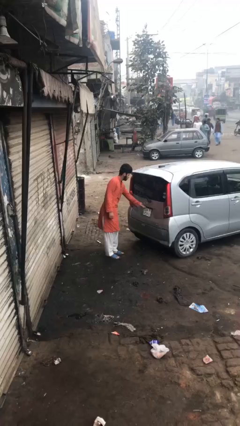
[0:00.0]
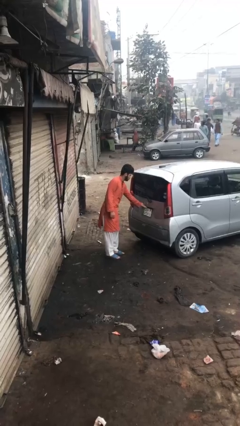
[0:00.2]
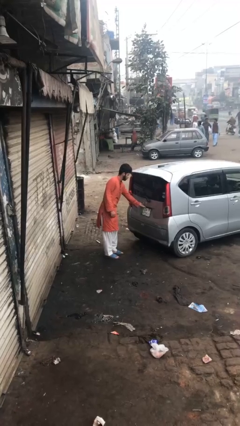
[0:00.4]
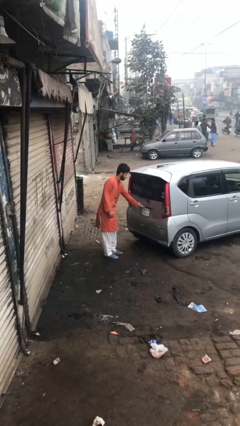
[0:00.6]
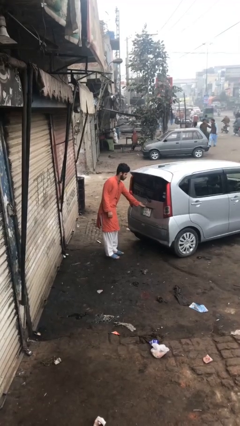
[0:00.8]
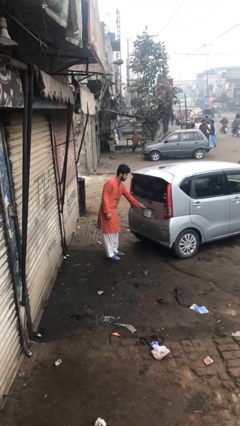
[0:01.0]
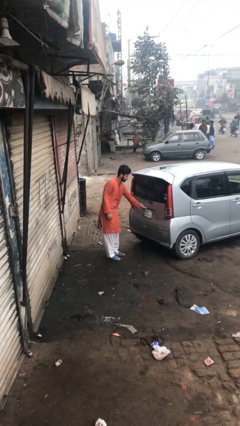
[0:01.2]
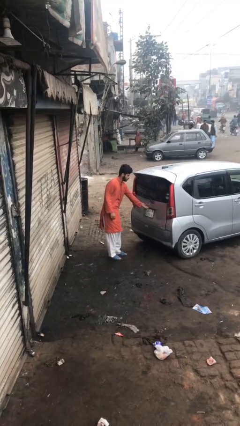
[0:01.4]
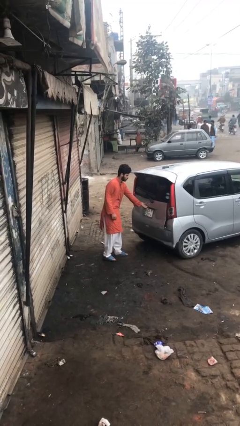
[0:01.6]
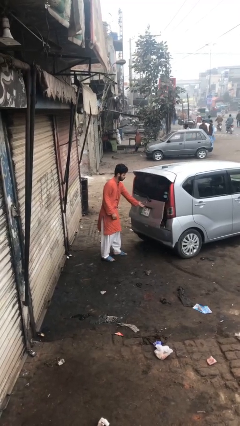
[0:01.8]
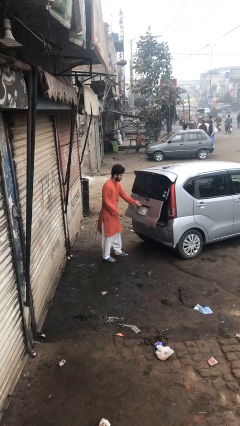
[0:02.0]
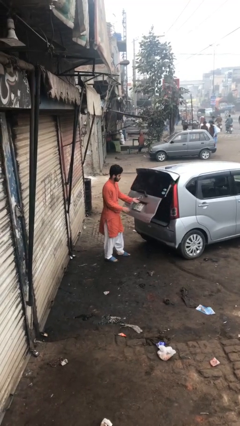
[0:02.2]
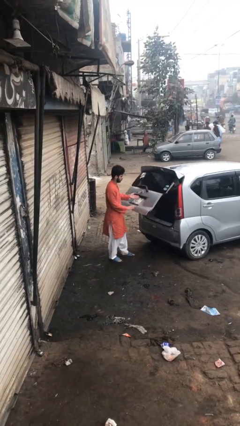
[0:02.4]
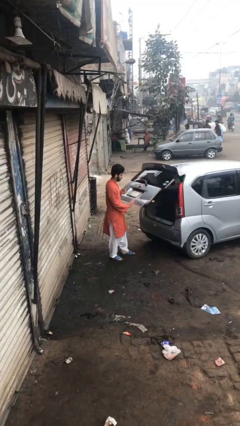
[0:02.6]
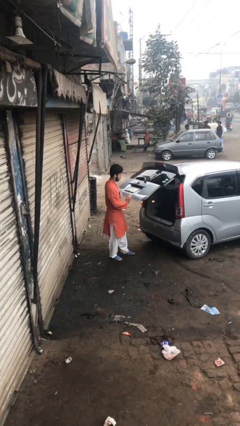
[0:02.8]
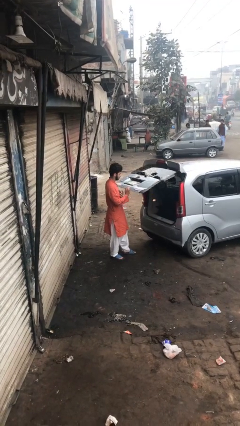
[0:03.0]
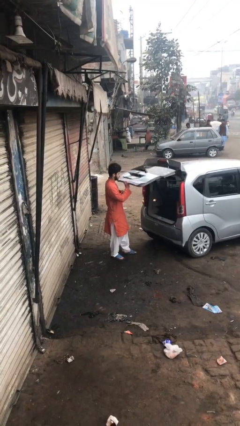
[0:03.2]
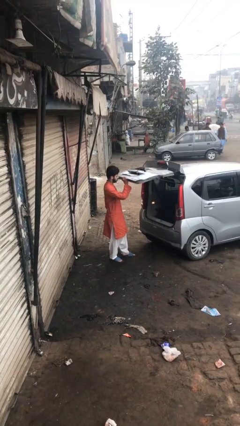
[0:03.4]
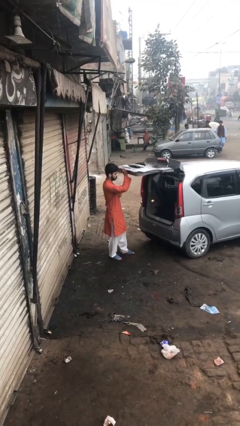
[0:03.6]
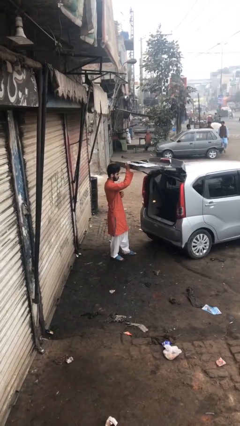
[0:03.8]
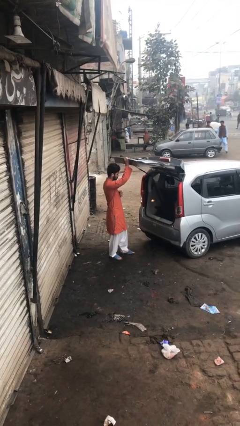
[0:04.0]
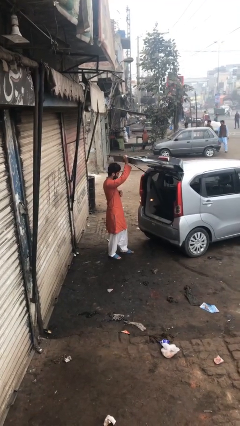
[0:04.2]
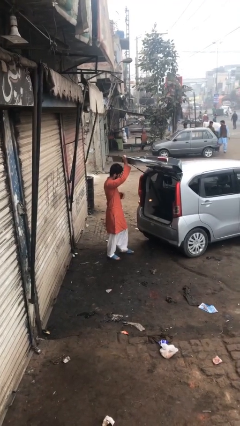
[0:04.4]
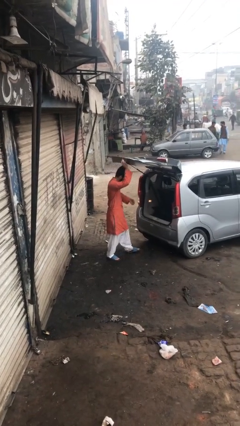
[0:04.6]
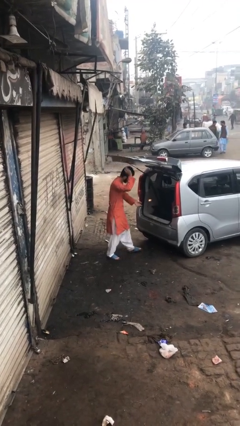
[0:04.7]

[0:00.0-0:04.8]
person opens car trunk

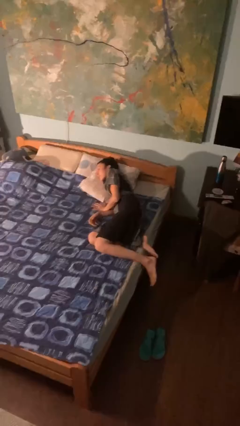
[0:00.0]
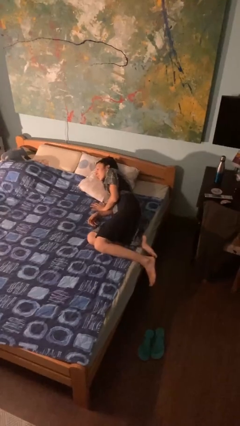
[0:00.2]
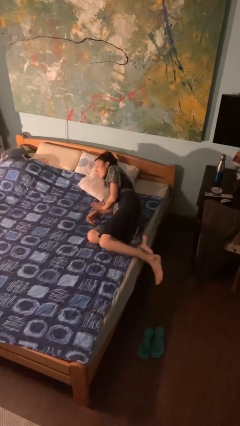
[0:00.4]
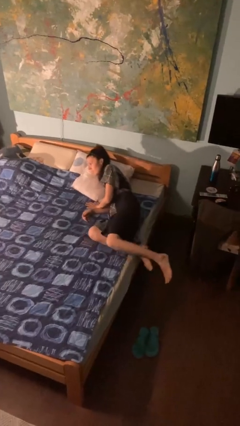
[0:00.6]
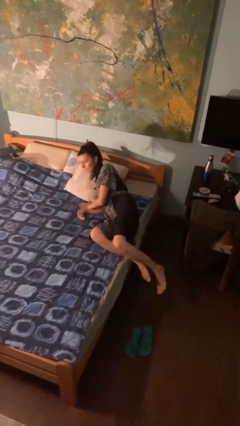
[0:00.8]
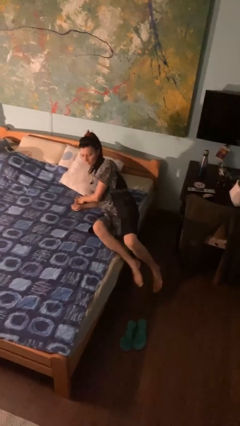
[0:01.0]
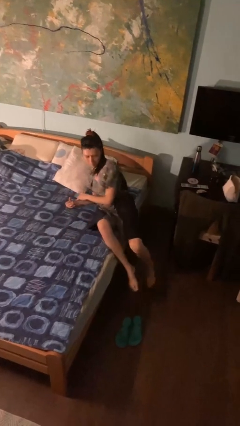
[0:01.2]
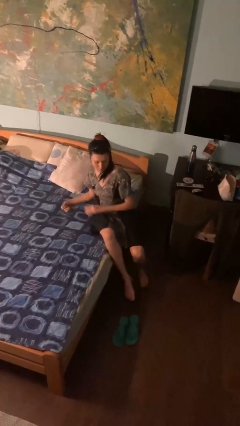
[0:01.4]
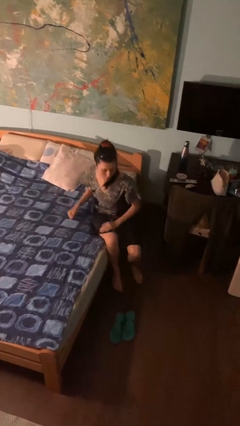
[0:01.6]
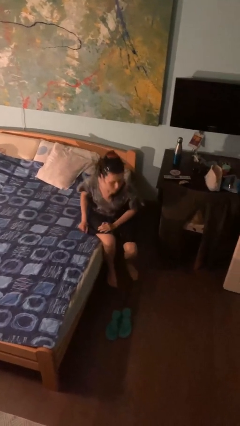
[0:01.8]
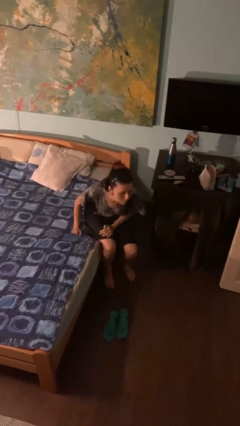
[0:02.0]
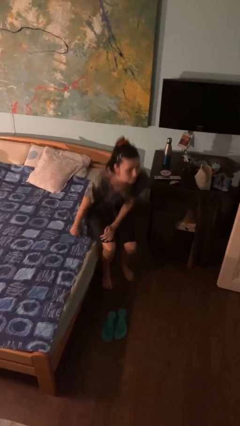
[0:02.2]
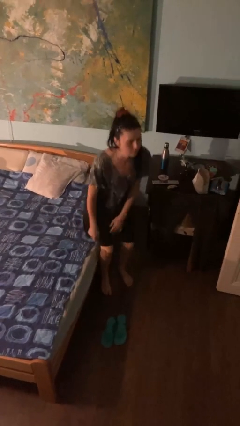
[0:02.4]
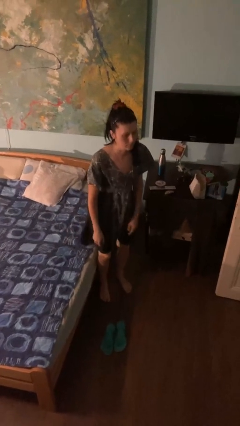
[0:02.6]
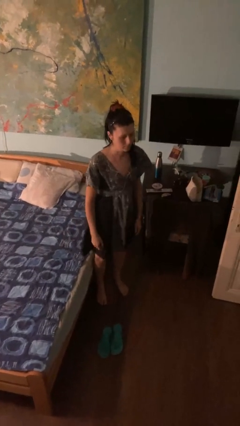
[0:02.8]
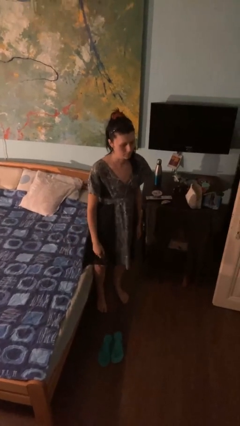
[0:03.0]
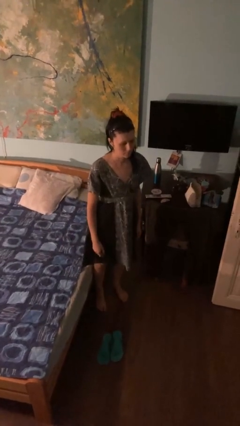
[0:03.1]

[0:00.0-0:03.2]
person stands up

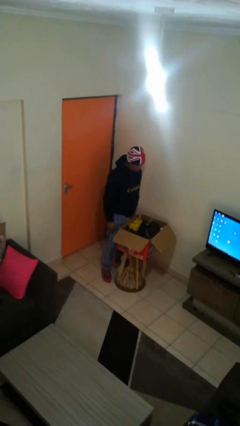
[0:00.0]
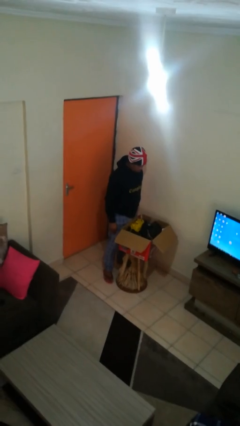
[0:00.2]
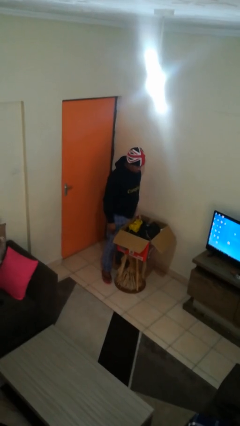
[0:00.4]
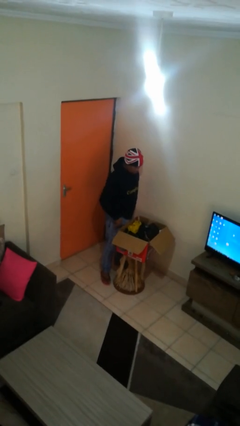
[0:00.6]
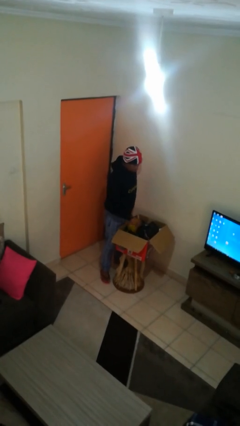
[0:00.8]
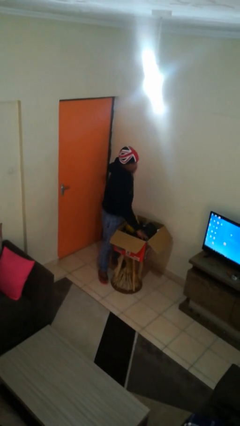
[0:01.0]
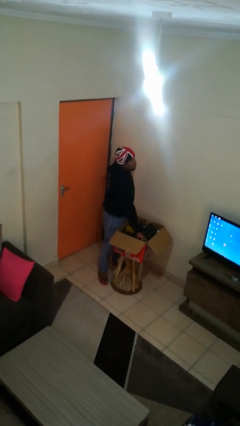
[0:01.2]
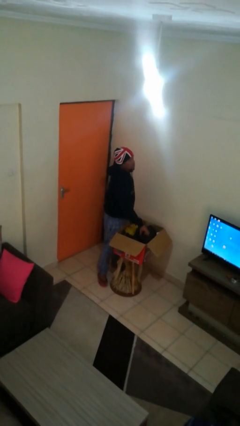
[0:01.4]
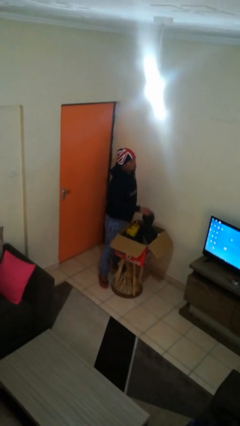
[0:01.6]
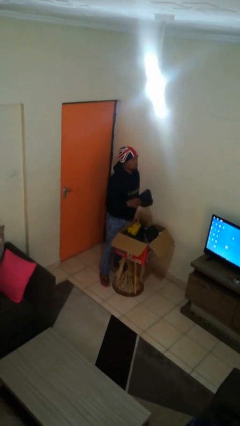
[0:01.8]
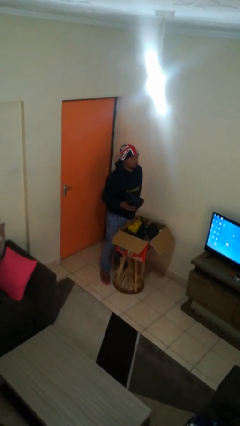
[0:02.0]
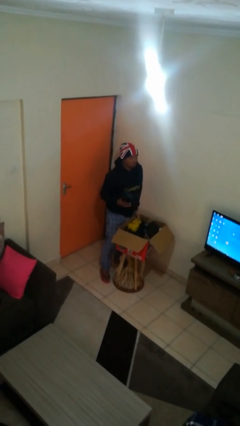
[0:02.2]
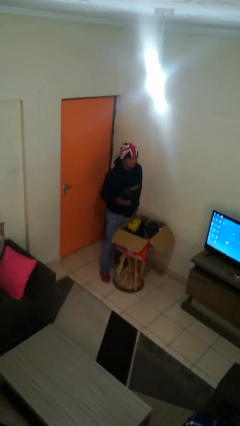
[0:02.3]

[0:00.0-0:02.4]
person takes object from box

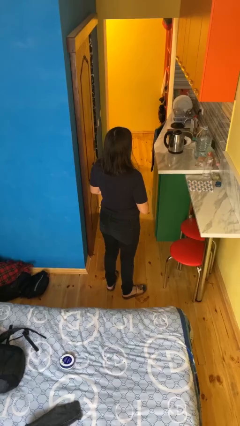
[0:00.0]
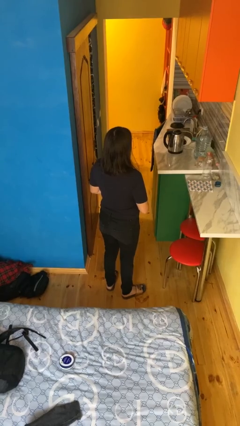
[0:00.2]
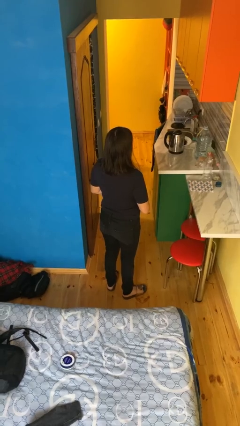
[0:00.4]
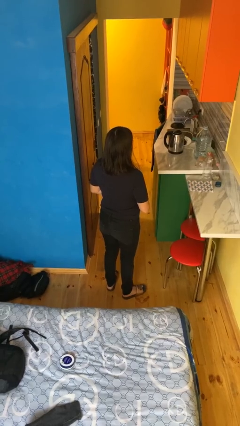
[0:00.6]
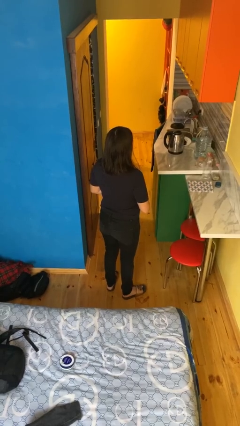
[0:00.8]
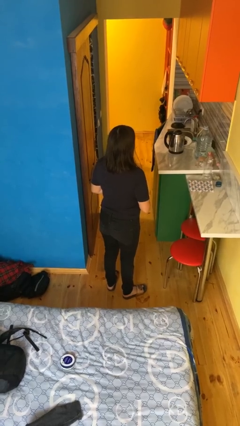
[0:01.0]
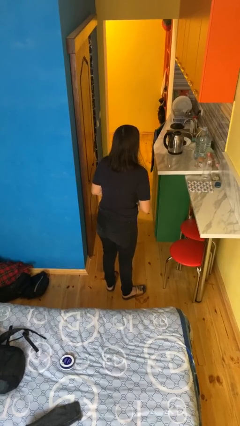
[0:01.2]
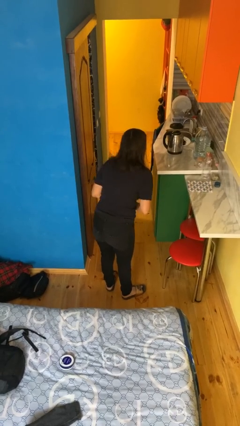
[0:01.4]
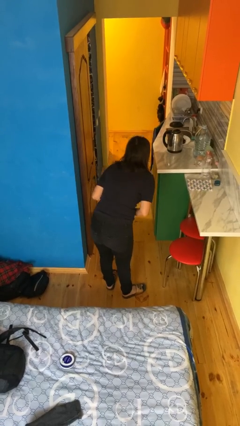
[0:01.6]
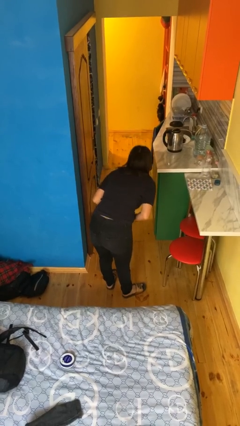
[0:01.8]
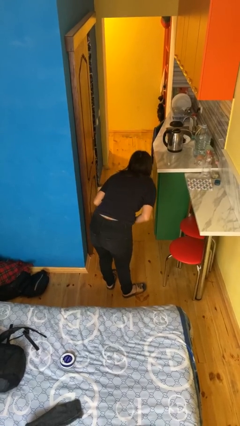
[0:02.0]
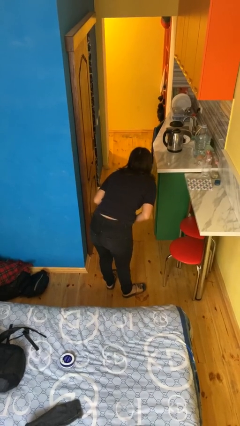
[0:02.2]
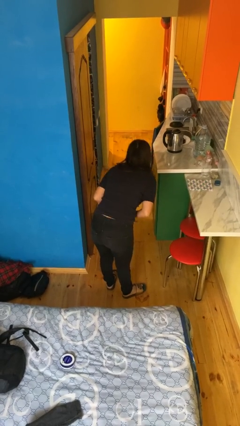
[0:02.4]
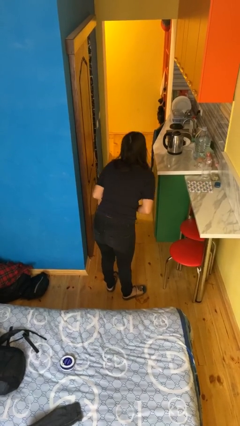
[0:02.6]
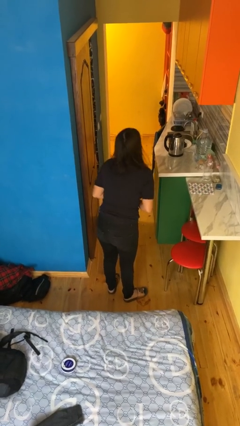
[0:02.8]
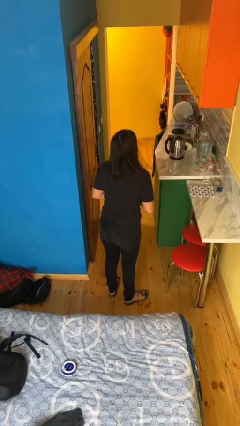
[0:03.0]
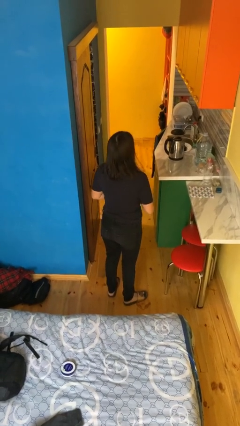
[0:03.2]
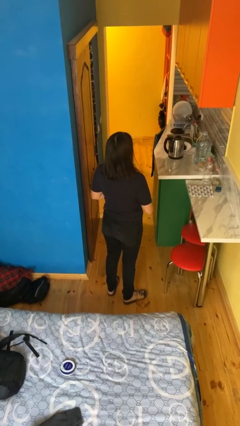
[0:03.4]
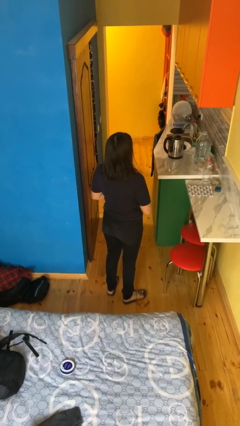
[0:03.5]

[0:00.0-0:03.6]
person bows

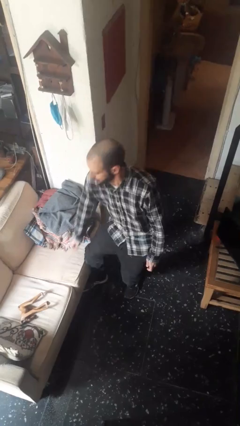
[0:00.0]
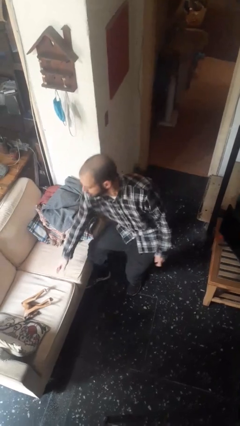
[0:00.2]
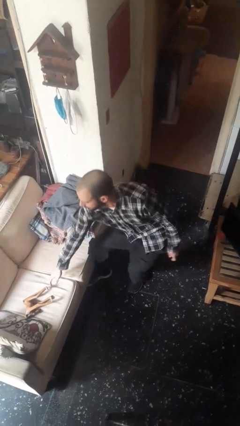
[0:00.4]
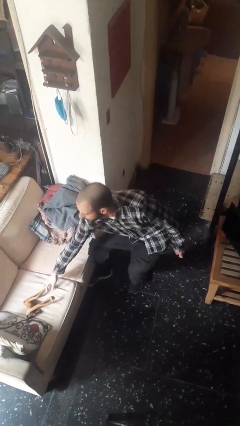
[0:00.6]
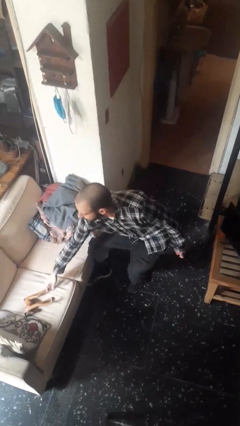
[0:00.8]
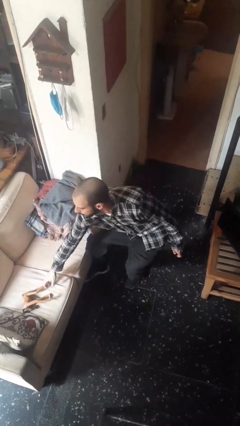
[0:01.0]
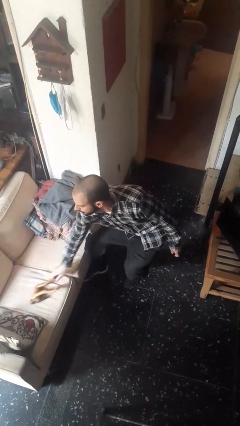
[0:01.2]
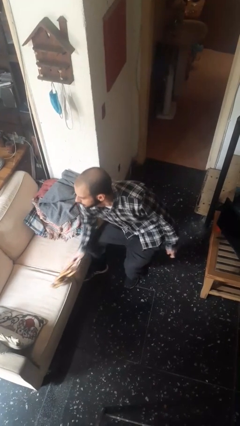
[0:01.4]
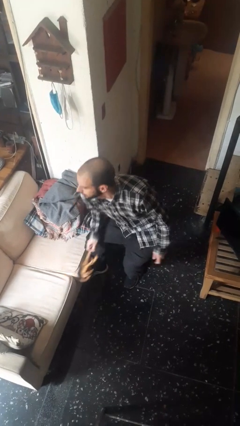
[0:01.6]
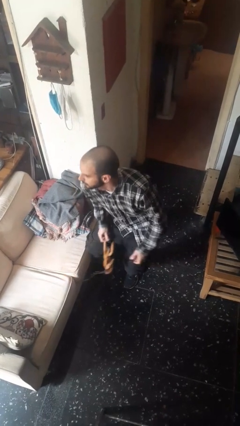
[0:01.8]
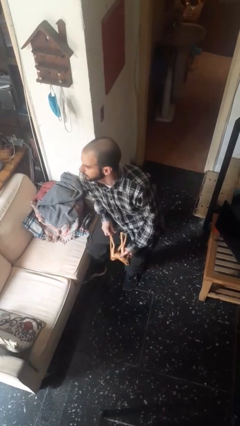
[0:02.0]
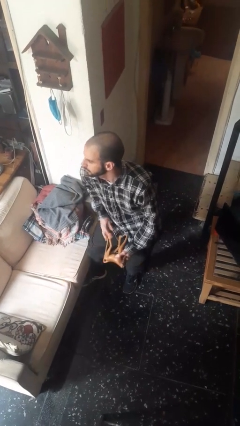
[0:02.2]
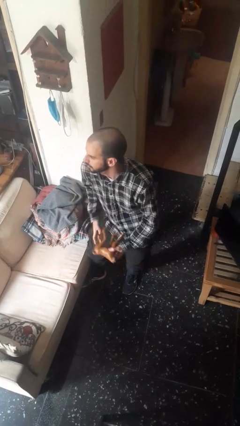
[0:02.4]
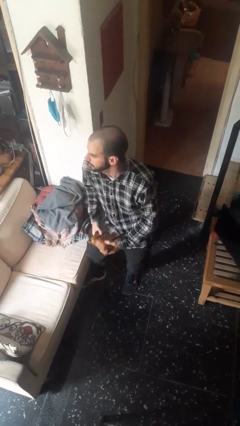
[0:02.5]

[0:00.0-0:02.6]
person picks up object from couch

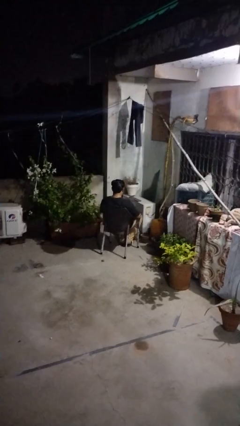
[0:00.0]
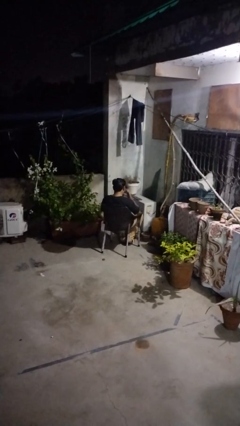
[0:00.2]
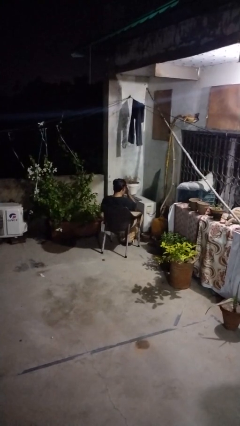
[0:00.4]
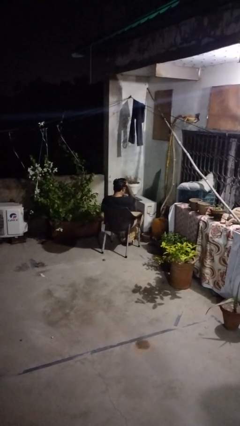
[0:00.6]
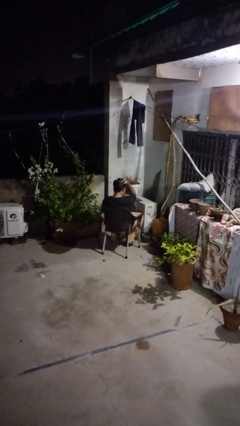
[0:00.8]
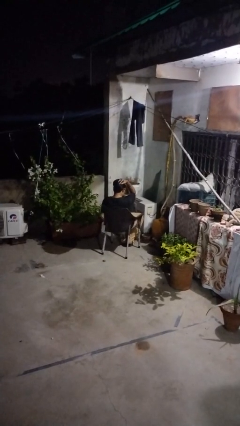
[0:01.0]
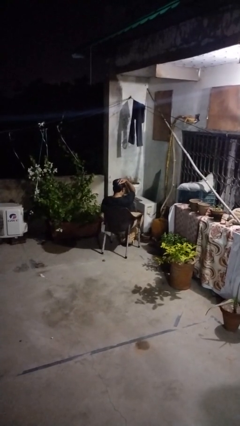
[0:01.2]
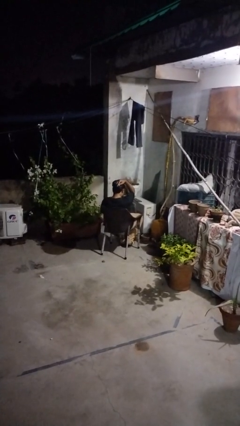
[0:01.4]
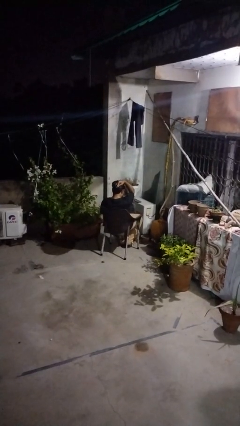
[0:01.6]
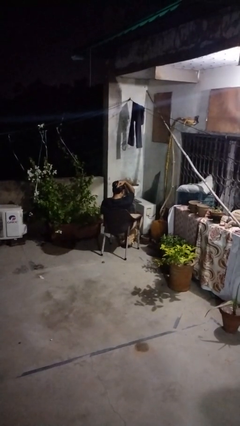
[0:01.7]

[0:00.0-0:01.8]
person strokes hair
